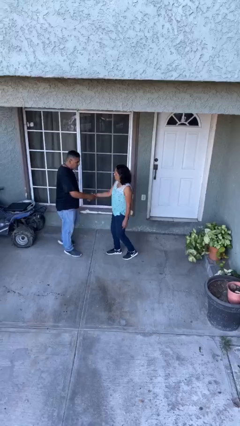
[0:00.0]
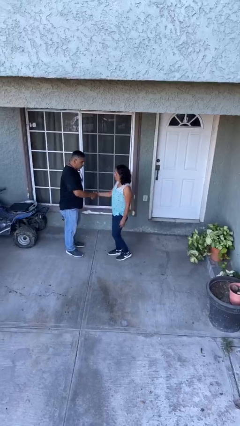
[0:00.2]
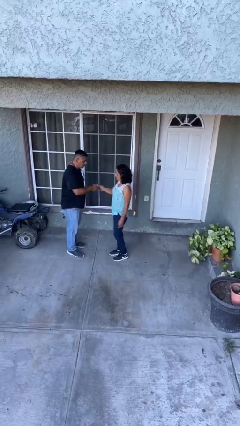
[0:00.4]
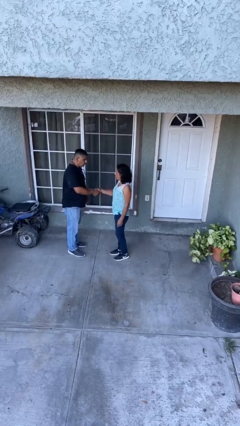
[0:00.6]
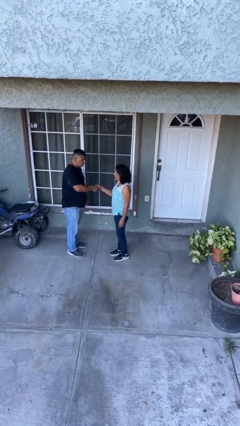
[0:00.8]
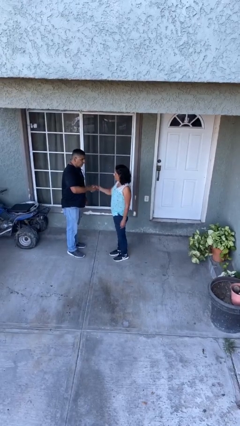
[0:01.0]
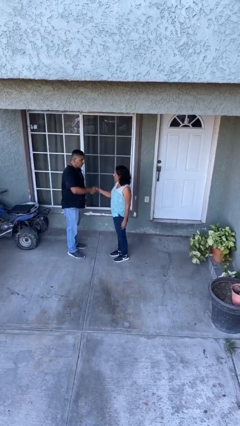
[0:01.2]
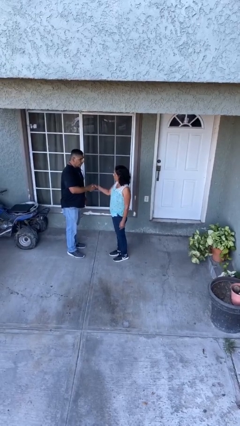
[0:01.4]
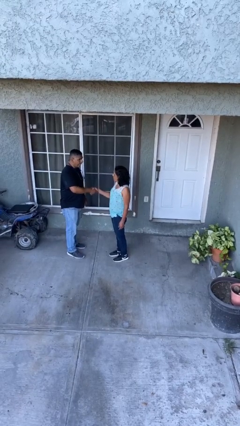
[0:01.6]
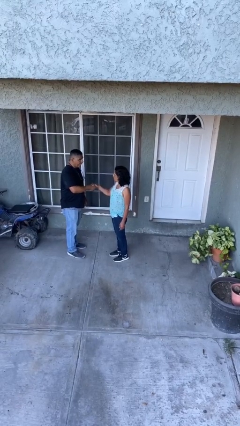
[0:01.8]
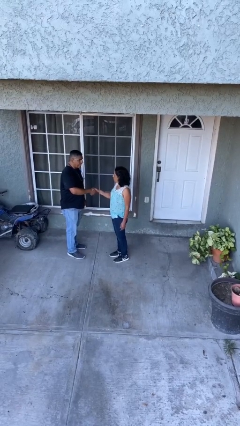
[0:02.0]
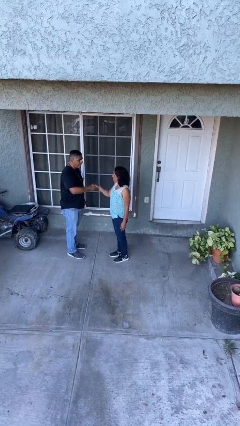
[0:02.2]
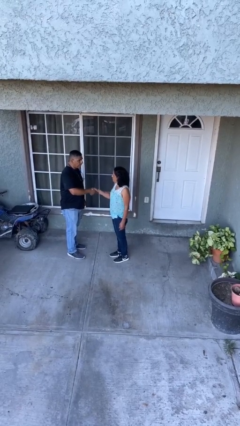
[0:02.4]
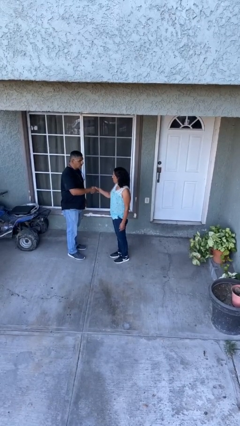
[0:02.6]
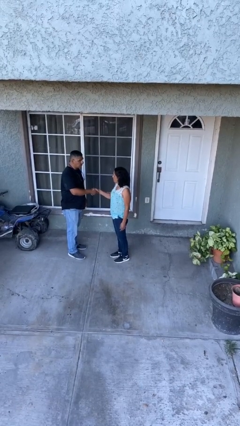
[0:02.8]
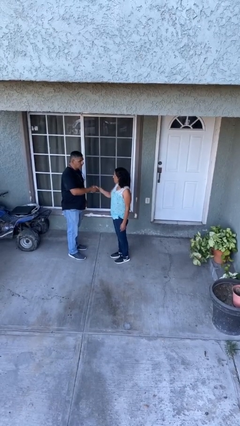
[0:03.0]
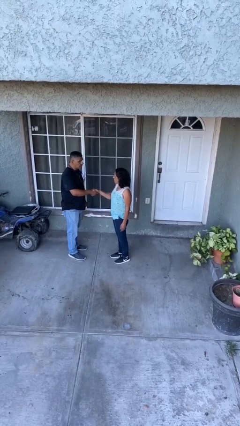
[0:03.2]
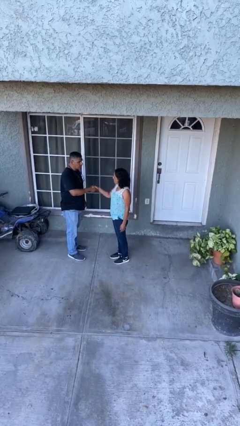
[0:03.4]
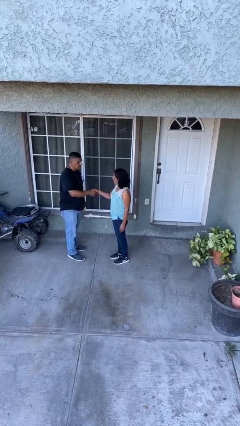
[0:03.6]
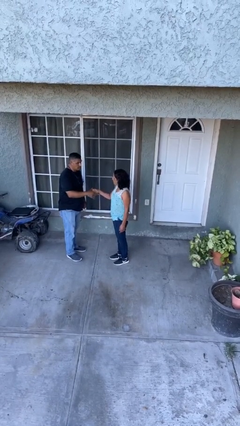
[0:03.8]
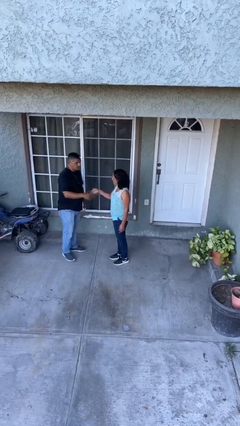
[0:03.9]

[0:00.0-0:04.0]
person shakes hand

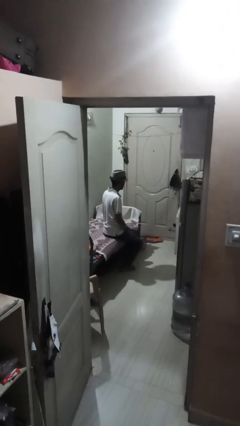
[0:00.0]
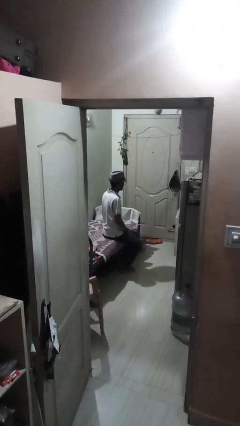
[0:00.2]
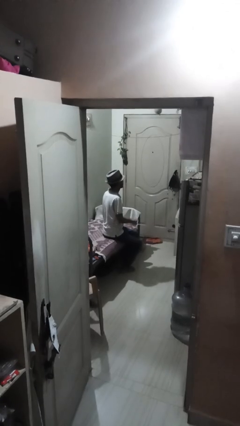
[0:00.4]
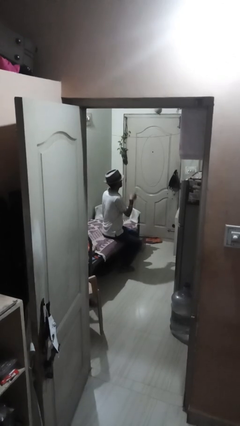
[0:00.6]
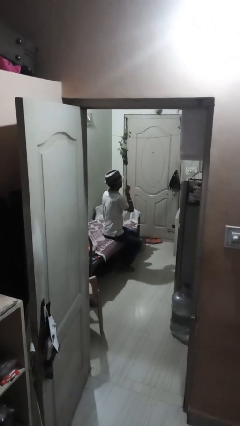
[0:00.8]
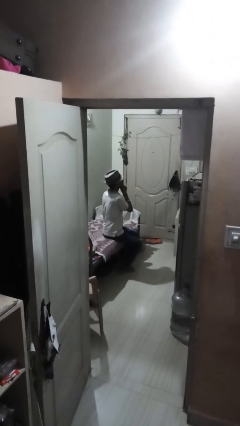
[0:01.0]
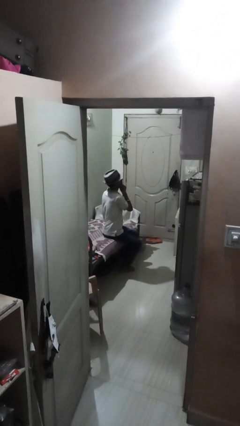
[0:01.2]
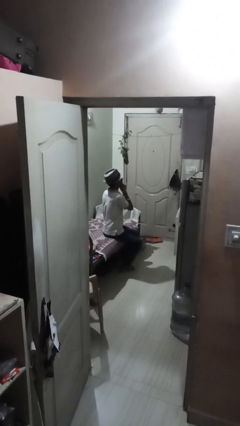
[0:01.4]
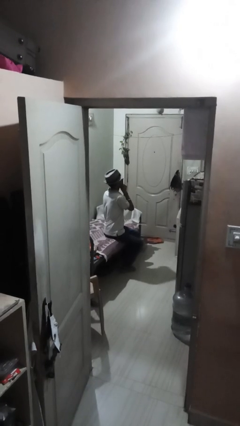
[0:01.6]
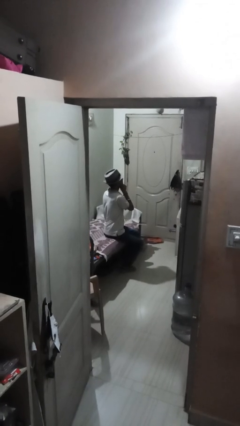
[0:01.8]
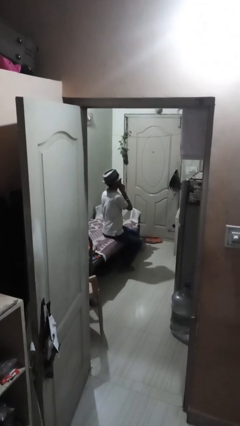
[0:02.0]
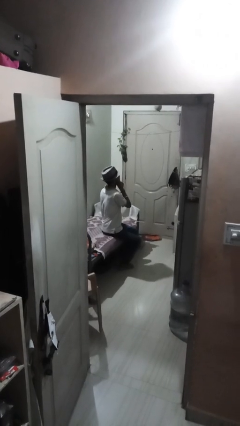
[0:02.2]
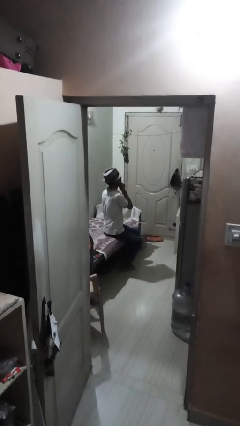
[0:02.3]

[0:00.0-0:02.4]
person gestures be quiet

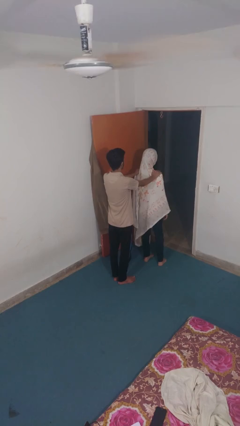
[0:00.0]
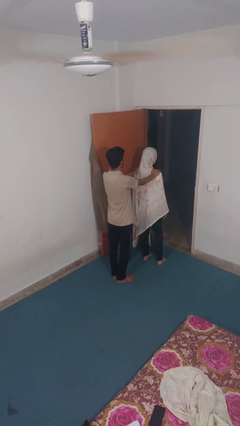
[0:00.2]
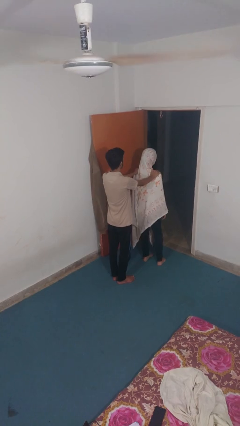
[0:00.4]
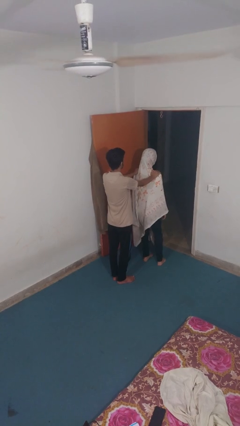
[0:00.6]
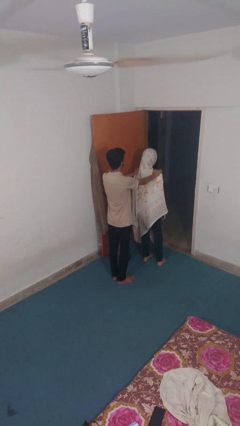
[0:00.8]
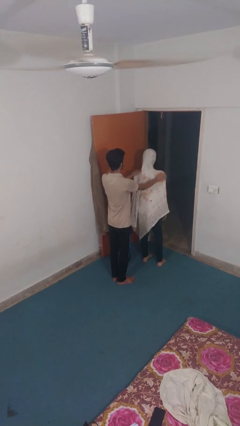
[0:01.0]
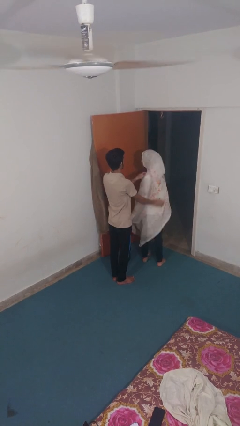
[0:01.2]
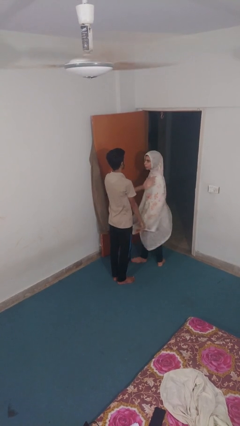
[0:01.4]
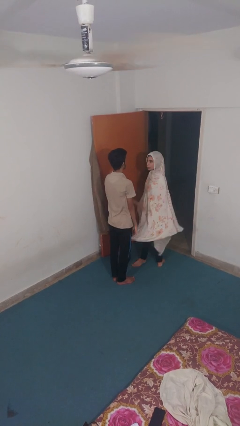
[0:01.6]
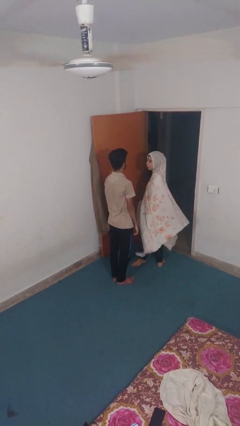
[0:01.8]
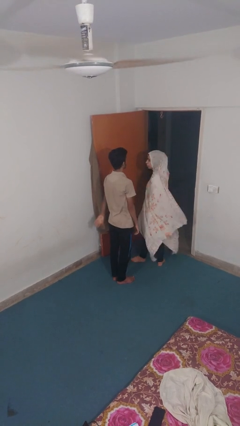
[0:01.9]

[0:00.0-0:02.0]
person spins person around

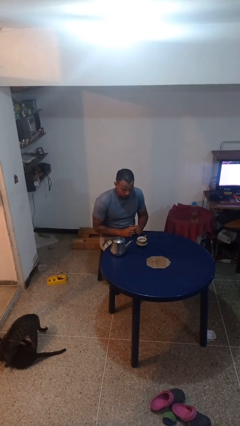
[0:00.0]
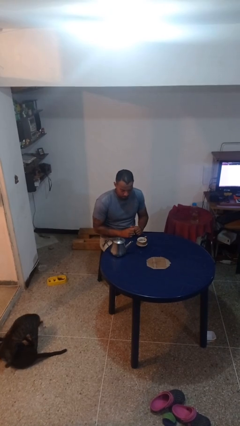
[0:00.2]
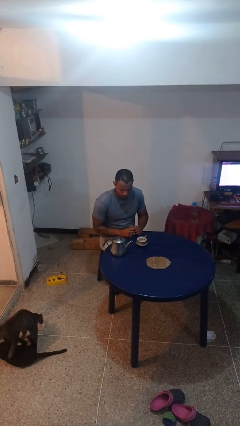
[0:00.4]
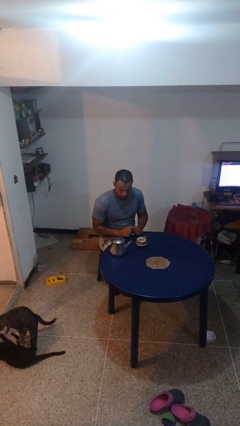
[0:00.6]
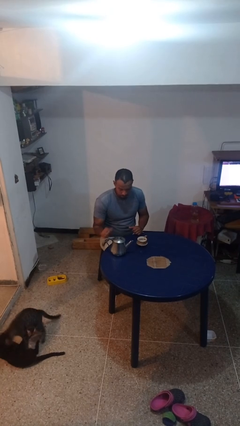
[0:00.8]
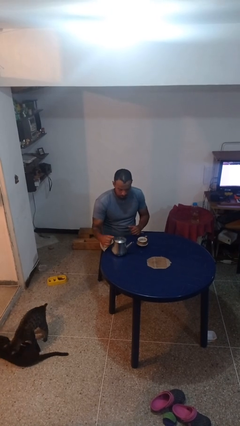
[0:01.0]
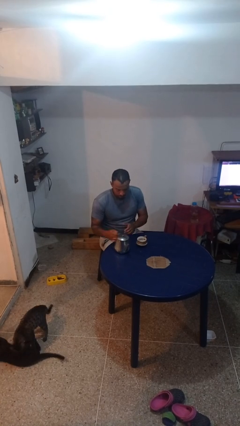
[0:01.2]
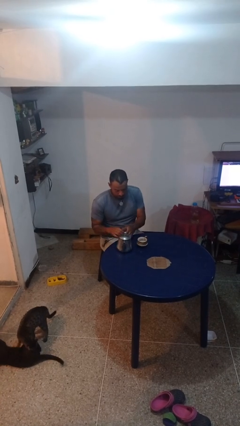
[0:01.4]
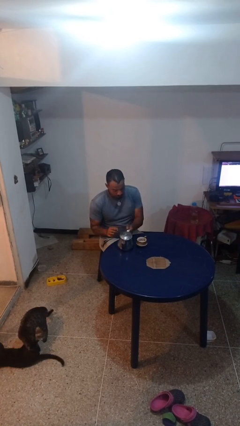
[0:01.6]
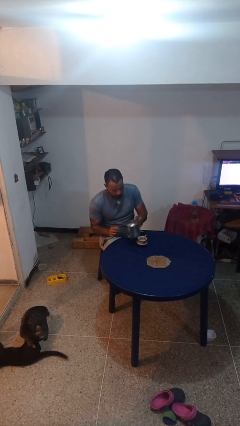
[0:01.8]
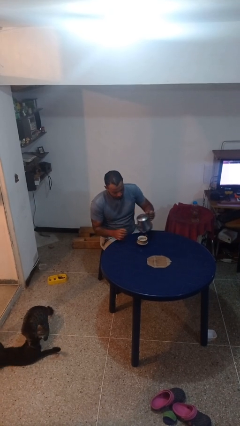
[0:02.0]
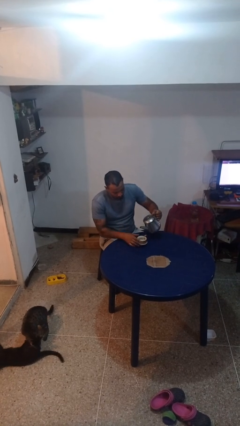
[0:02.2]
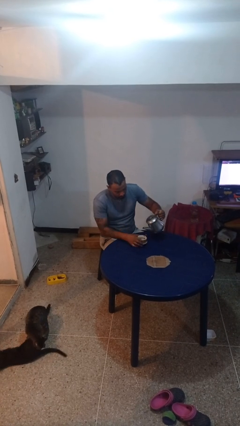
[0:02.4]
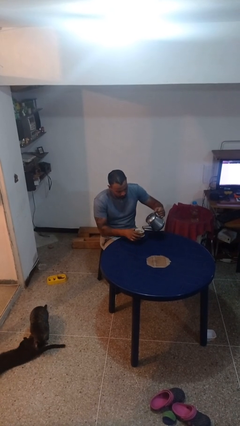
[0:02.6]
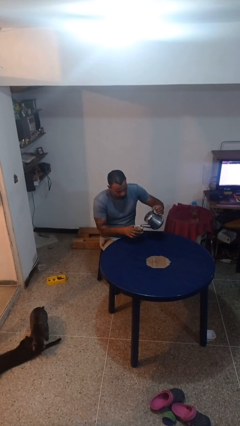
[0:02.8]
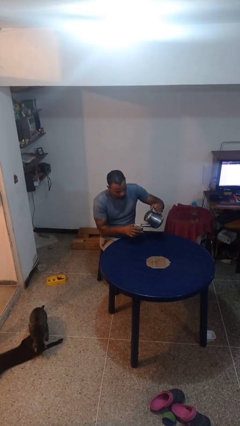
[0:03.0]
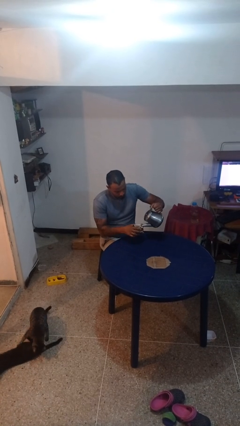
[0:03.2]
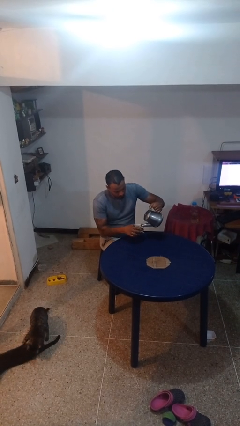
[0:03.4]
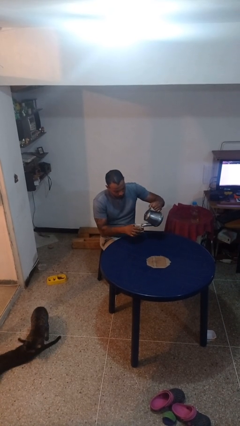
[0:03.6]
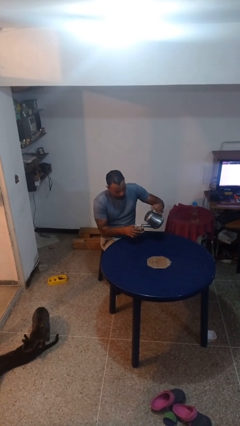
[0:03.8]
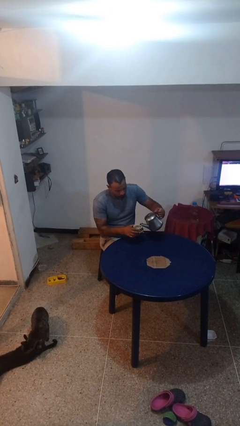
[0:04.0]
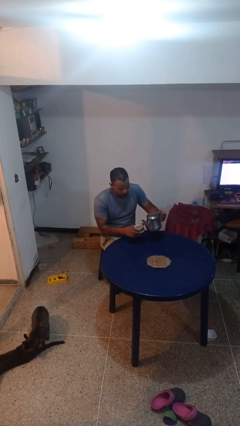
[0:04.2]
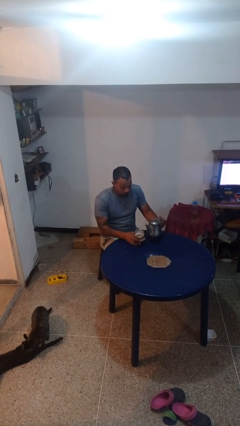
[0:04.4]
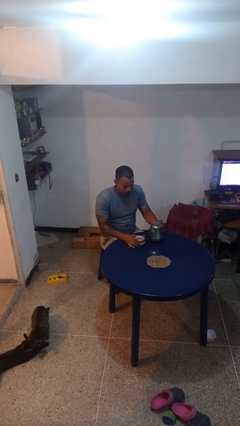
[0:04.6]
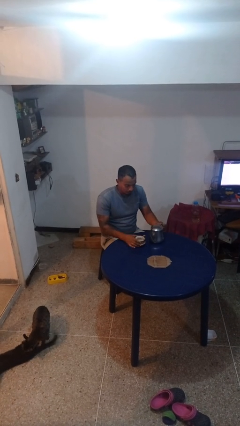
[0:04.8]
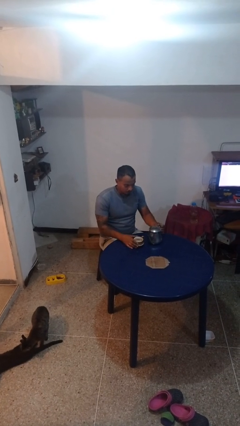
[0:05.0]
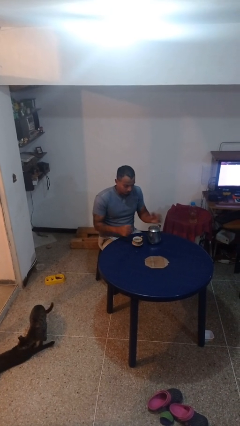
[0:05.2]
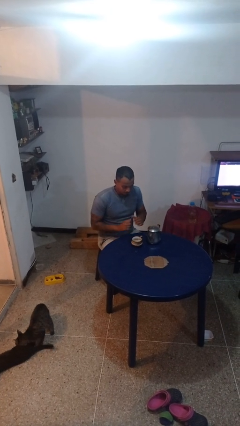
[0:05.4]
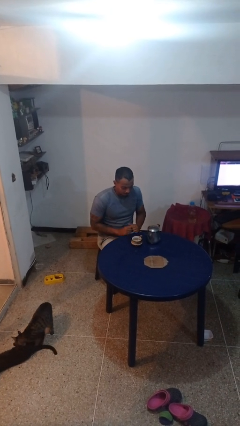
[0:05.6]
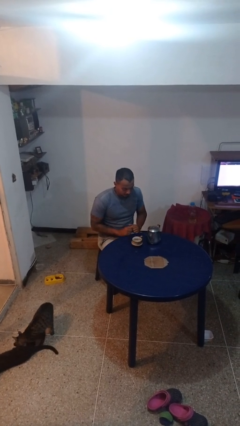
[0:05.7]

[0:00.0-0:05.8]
person pours coffee into mug

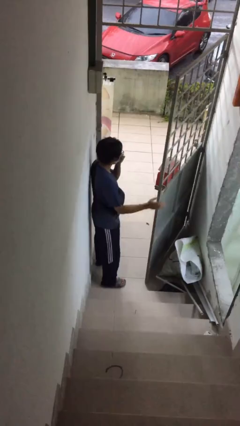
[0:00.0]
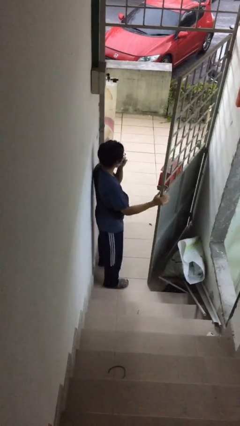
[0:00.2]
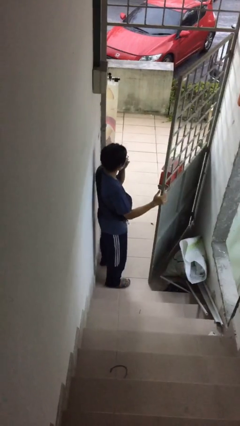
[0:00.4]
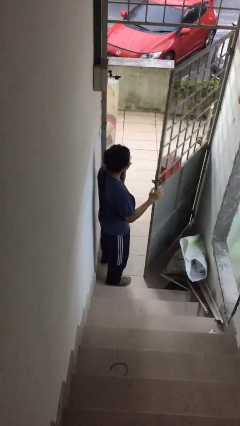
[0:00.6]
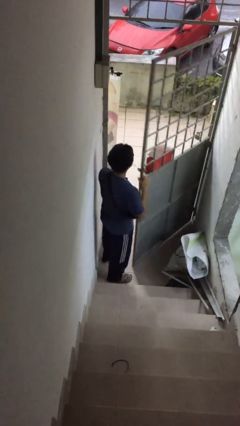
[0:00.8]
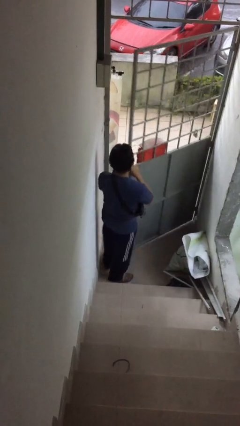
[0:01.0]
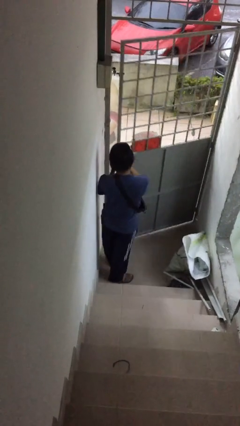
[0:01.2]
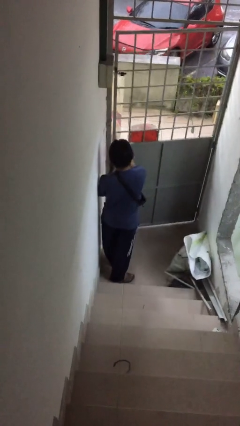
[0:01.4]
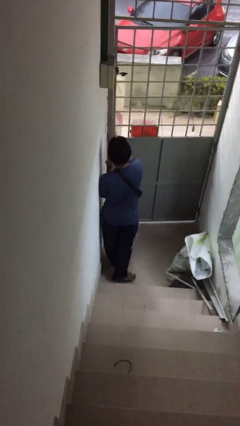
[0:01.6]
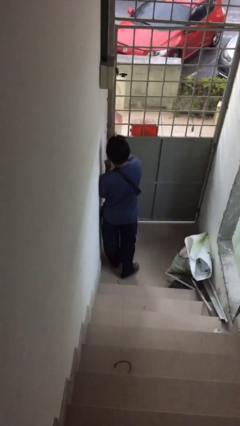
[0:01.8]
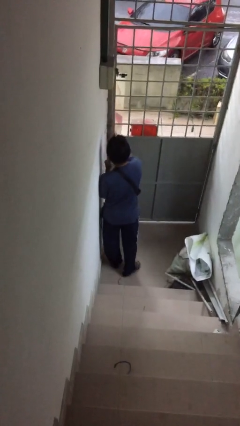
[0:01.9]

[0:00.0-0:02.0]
person closes facility door

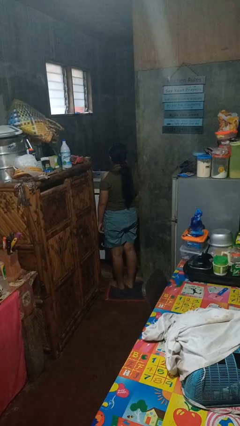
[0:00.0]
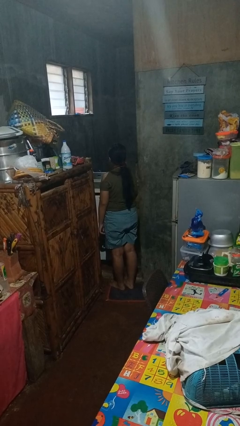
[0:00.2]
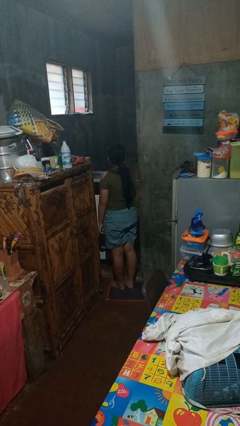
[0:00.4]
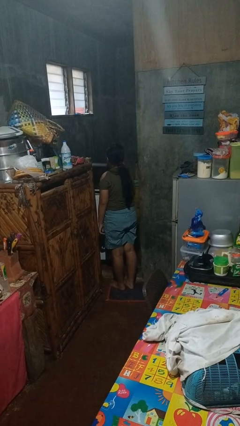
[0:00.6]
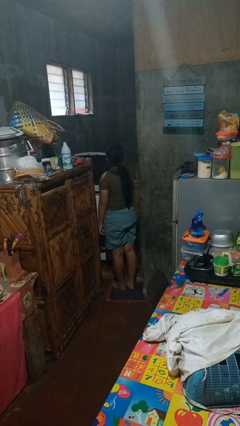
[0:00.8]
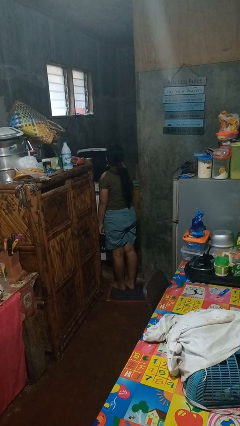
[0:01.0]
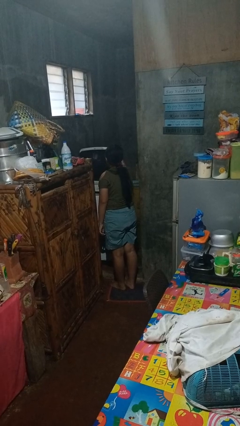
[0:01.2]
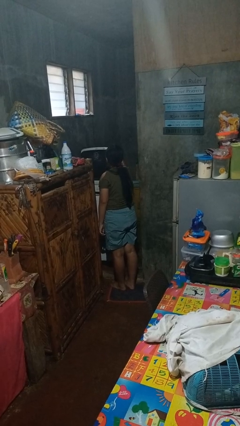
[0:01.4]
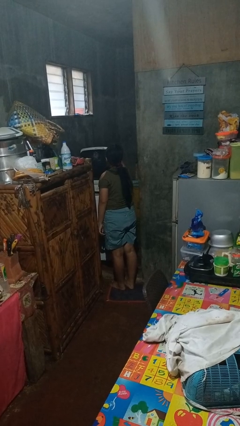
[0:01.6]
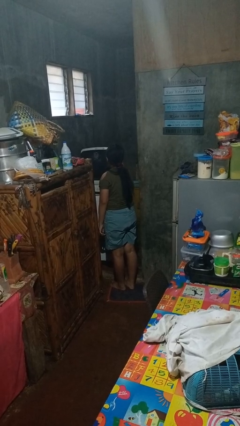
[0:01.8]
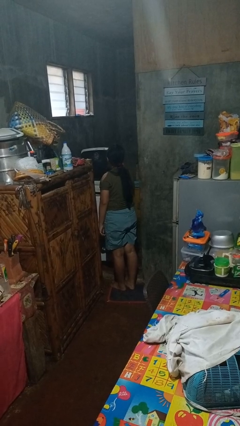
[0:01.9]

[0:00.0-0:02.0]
person opens clothes washer
